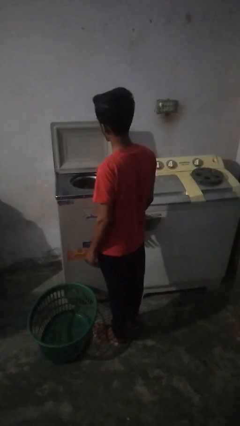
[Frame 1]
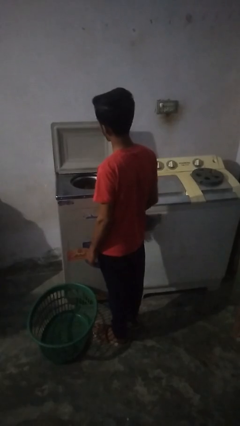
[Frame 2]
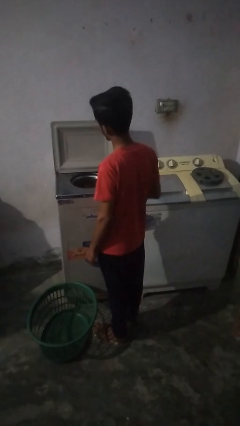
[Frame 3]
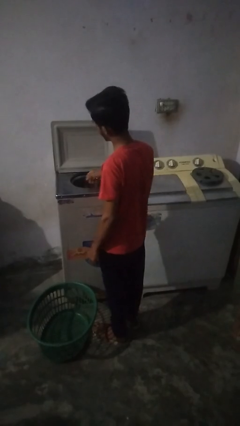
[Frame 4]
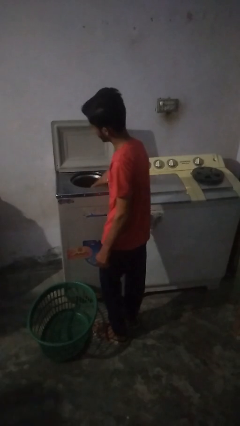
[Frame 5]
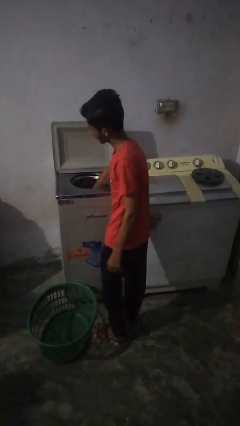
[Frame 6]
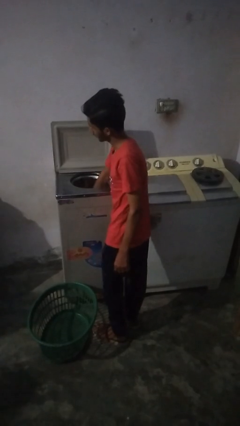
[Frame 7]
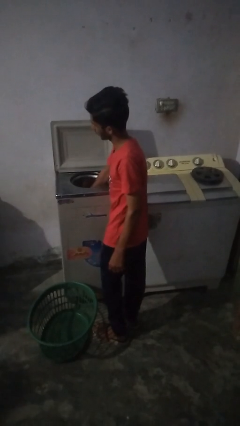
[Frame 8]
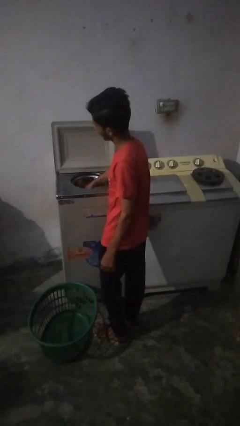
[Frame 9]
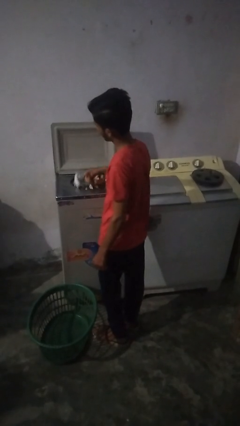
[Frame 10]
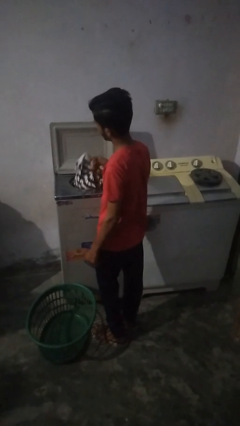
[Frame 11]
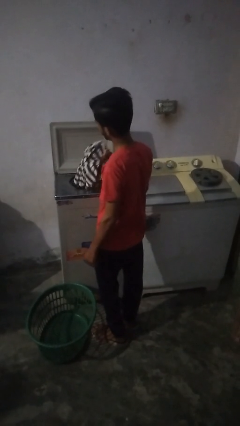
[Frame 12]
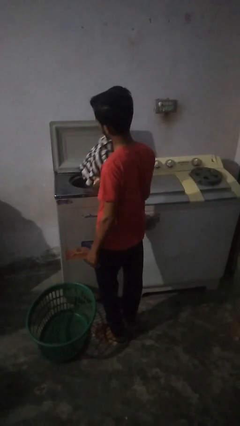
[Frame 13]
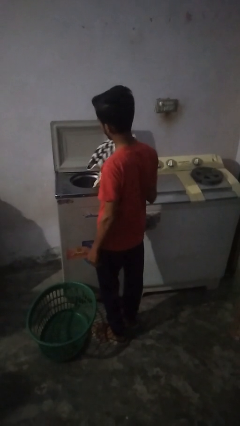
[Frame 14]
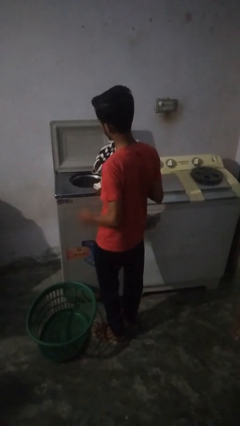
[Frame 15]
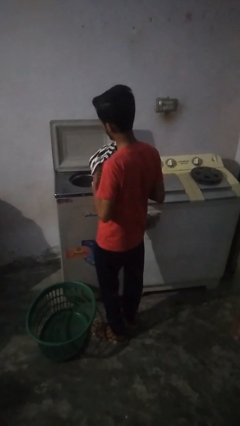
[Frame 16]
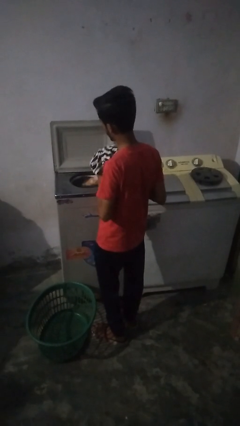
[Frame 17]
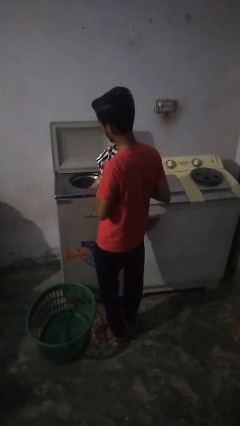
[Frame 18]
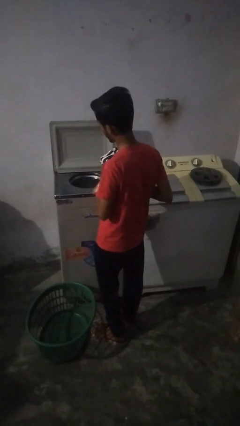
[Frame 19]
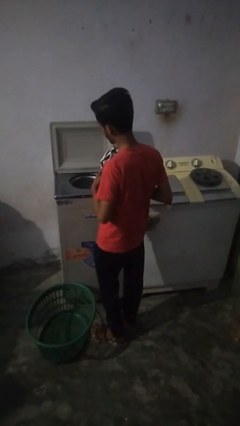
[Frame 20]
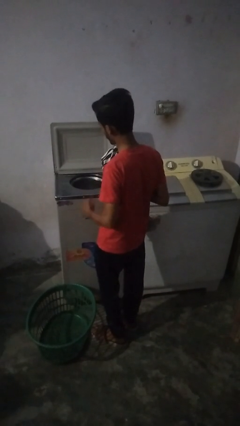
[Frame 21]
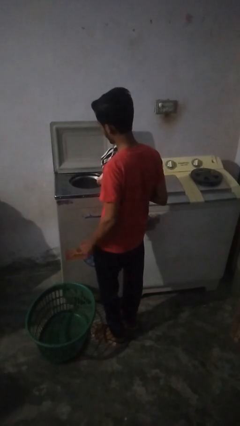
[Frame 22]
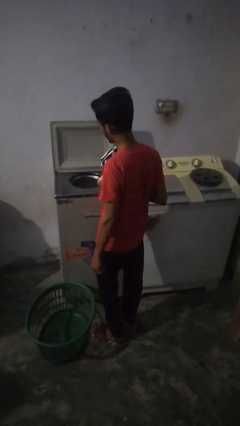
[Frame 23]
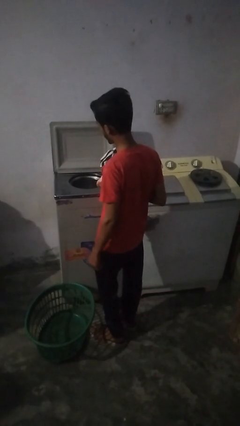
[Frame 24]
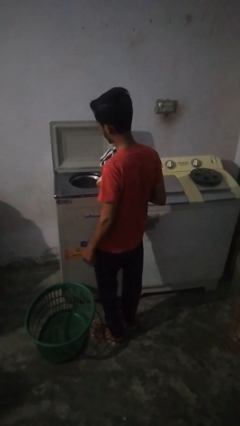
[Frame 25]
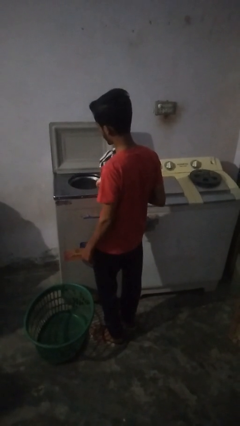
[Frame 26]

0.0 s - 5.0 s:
person unloads dryer

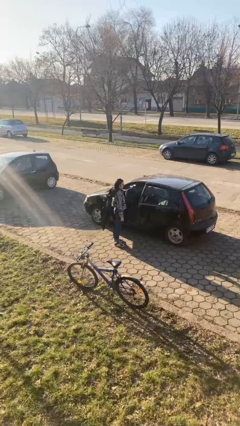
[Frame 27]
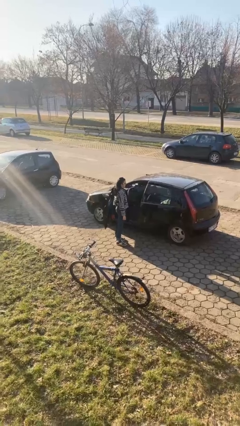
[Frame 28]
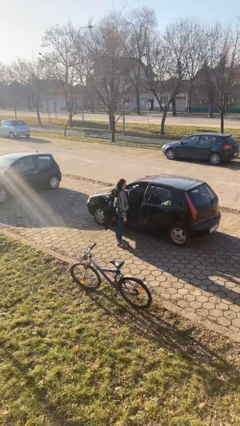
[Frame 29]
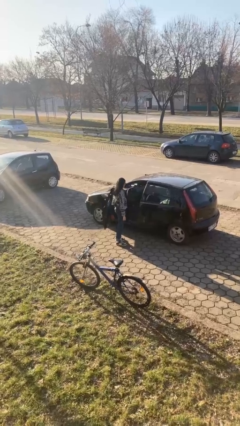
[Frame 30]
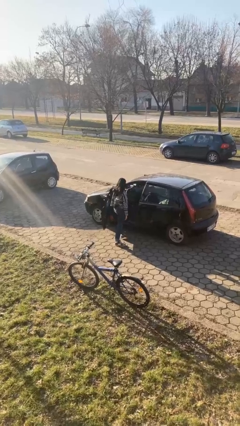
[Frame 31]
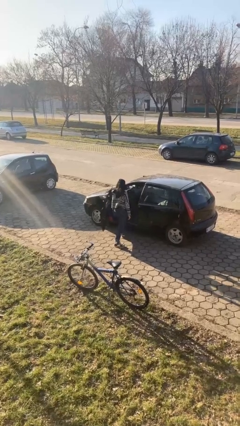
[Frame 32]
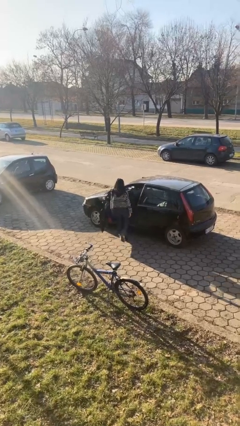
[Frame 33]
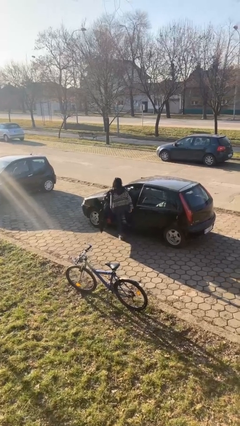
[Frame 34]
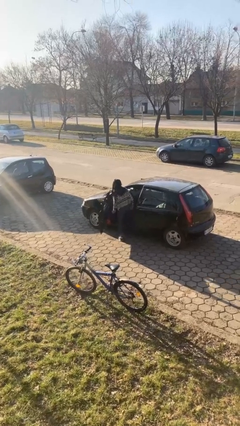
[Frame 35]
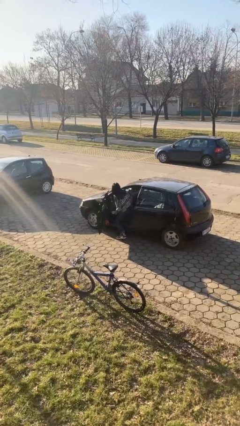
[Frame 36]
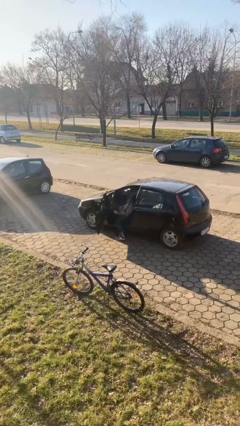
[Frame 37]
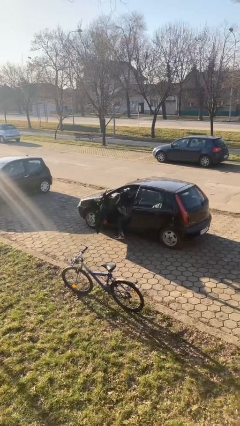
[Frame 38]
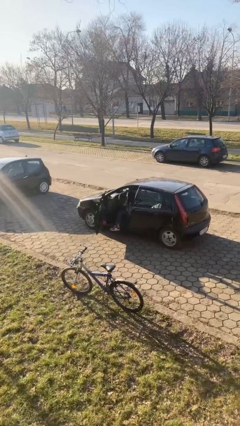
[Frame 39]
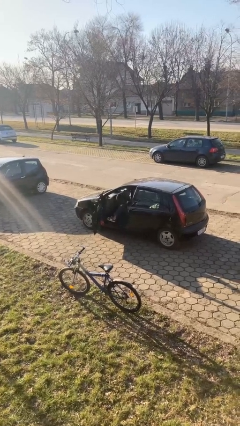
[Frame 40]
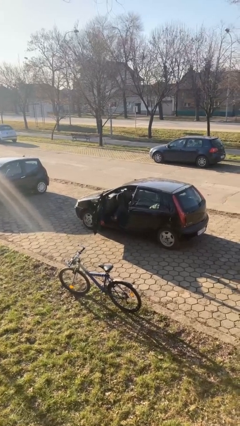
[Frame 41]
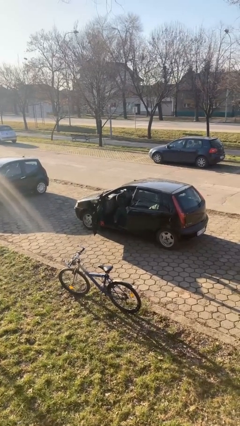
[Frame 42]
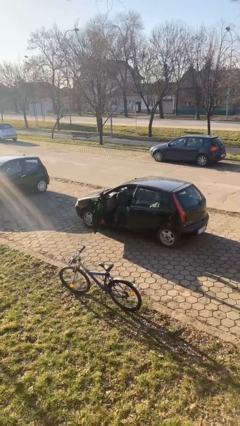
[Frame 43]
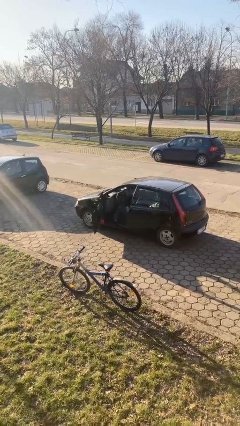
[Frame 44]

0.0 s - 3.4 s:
person enters car

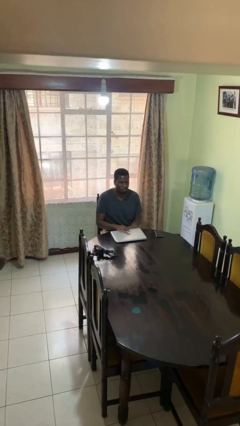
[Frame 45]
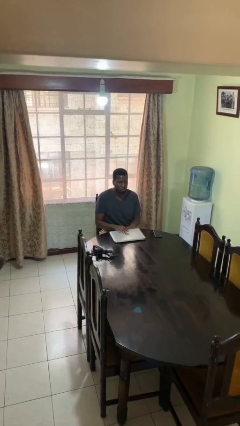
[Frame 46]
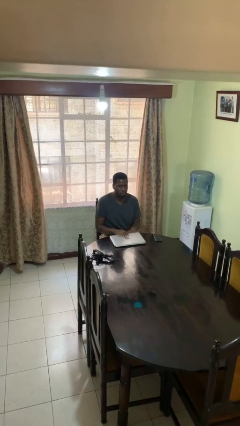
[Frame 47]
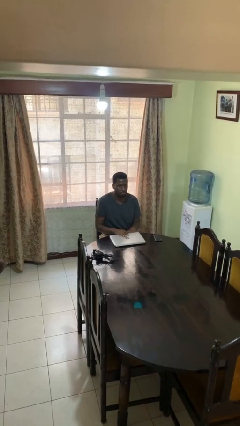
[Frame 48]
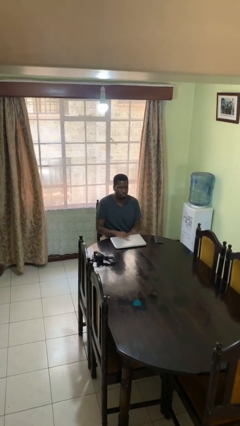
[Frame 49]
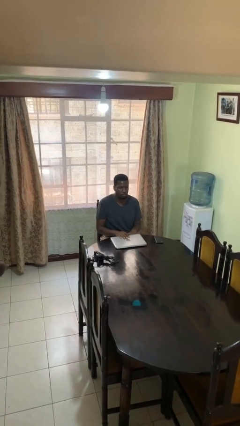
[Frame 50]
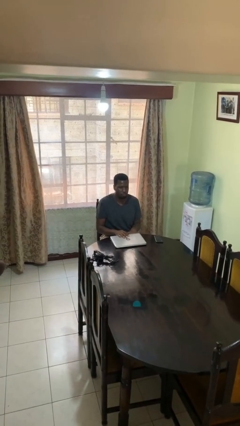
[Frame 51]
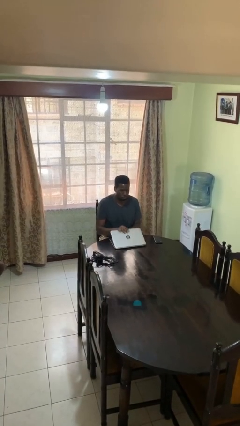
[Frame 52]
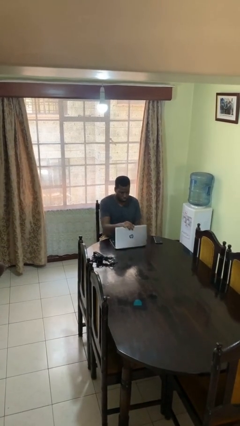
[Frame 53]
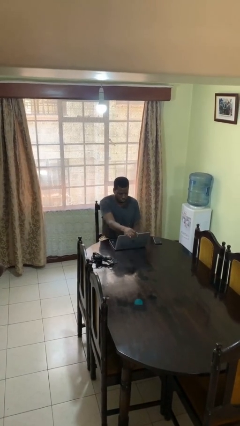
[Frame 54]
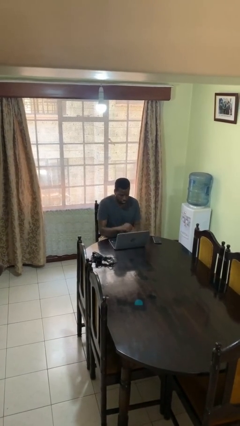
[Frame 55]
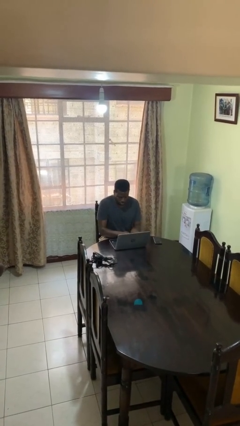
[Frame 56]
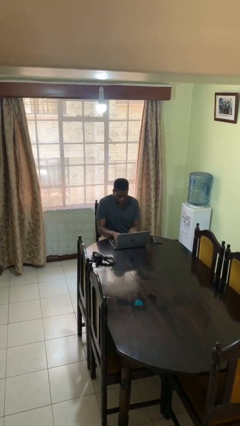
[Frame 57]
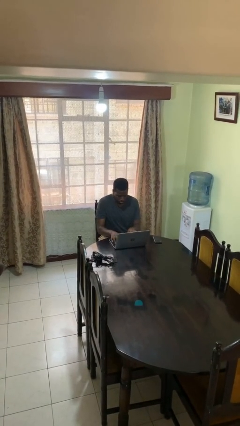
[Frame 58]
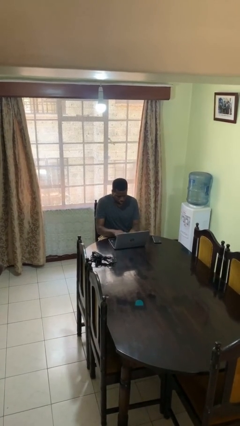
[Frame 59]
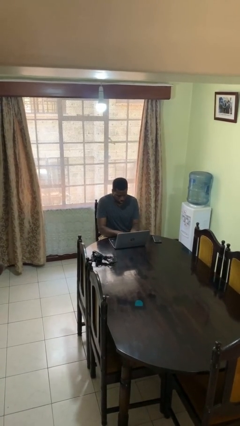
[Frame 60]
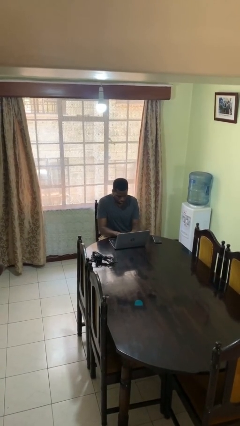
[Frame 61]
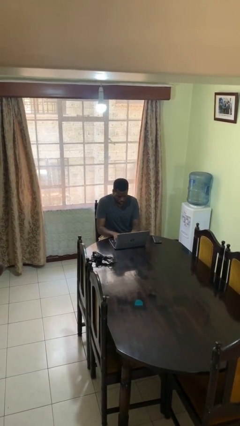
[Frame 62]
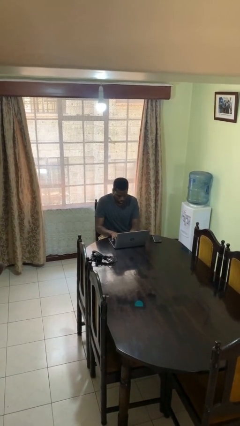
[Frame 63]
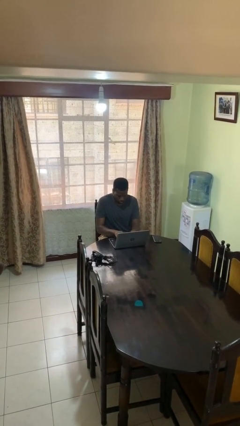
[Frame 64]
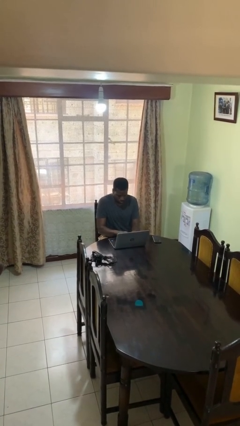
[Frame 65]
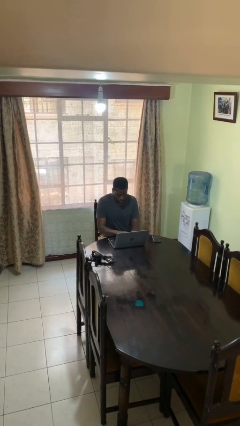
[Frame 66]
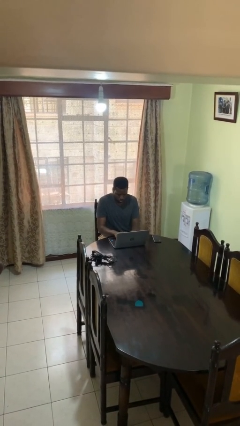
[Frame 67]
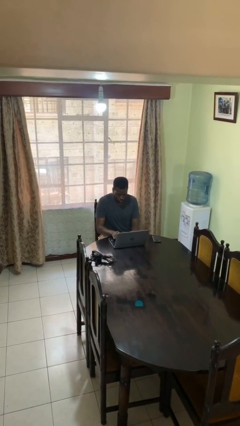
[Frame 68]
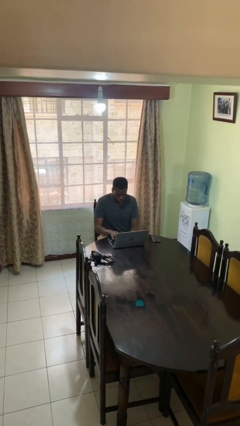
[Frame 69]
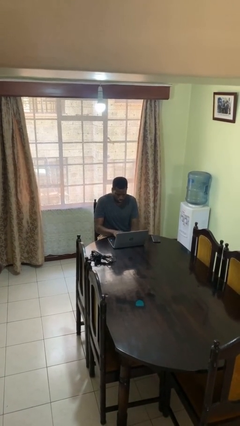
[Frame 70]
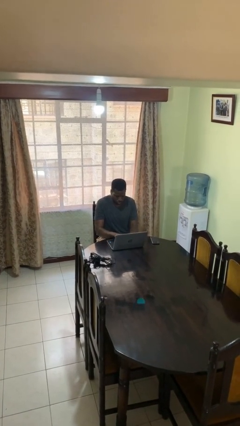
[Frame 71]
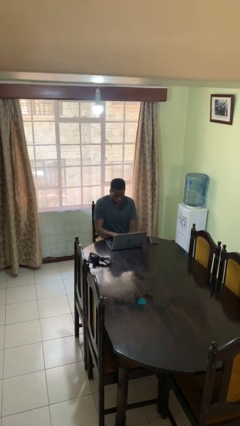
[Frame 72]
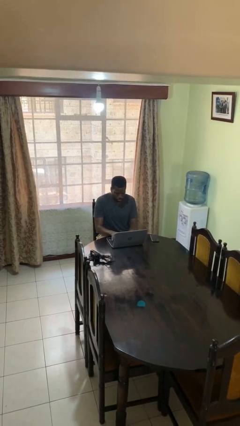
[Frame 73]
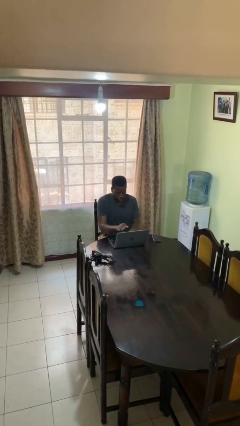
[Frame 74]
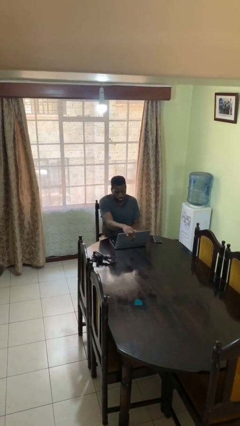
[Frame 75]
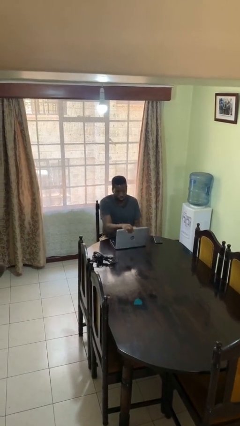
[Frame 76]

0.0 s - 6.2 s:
person interacts with laptop

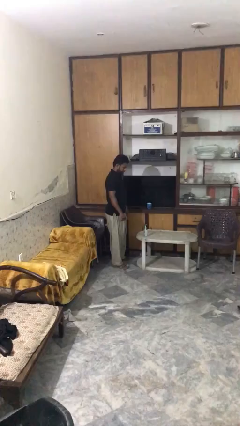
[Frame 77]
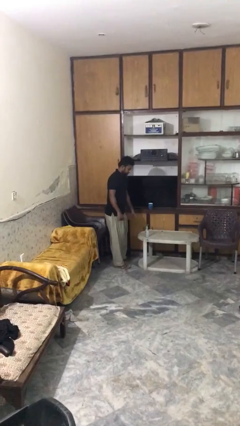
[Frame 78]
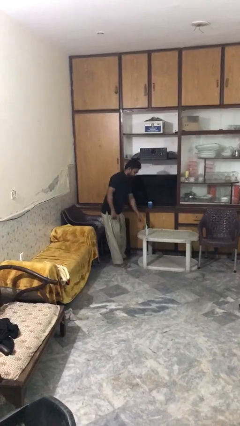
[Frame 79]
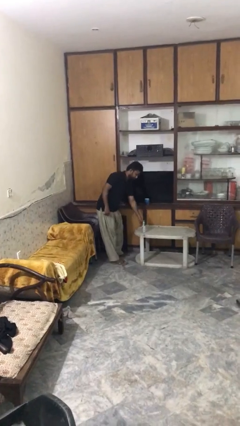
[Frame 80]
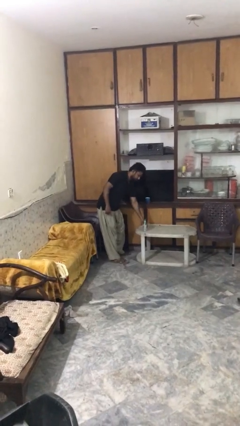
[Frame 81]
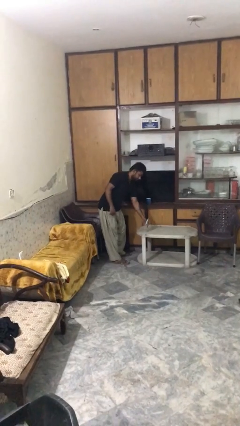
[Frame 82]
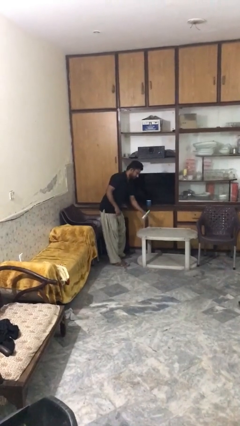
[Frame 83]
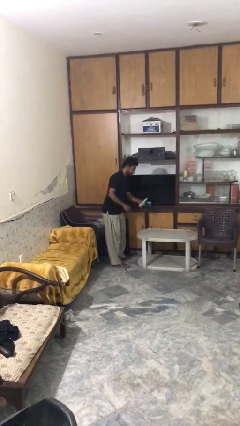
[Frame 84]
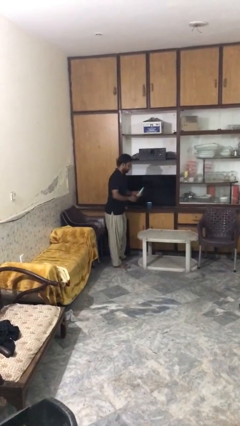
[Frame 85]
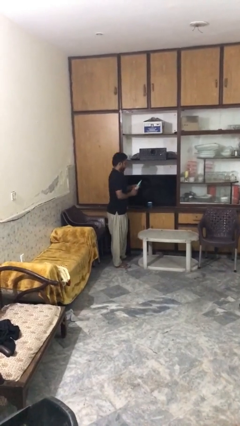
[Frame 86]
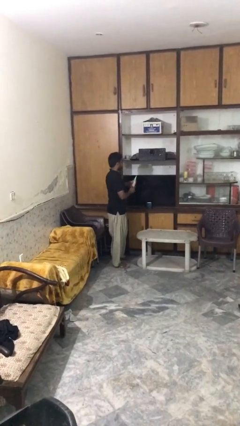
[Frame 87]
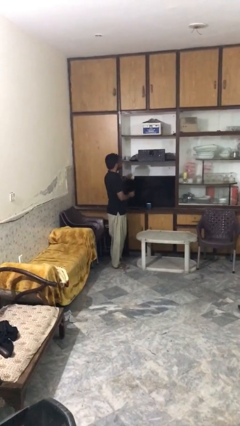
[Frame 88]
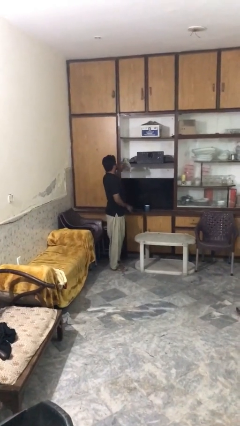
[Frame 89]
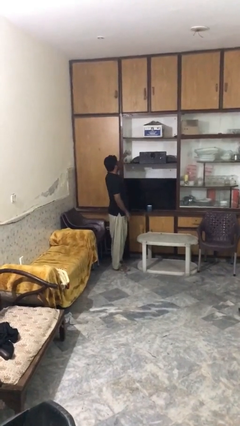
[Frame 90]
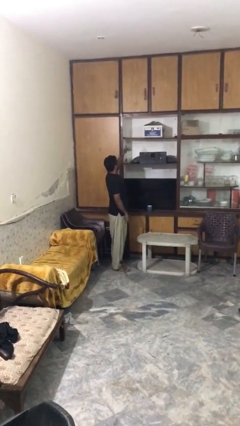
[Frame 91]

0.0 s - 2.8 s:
person picks up object from table

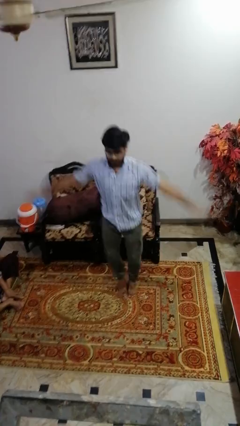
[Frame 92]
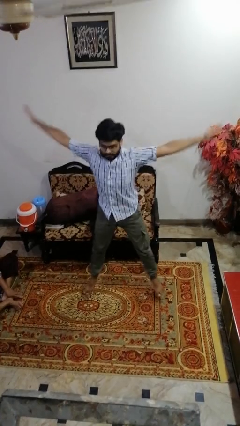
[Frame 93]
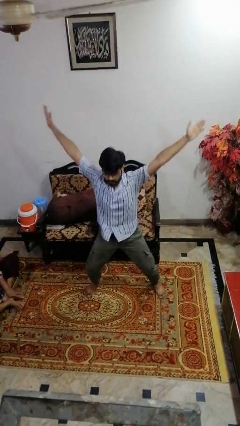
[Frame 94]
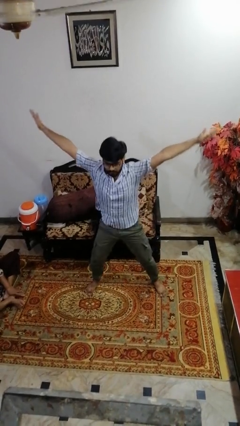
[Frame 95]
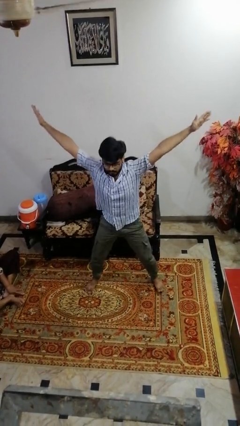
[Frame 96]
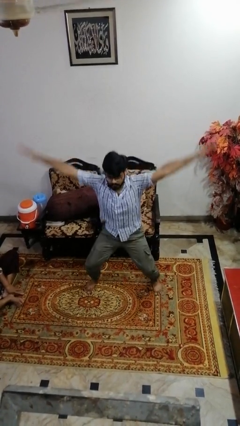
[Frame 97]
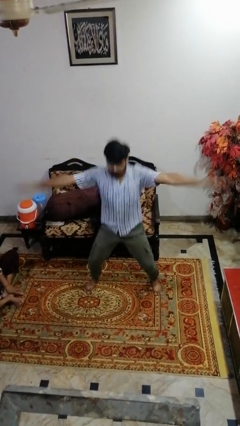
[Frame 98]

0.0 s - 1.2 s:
person exercises with jumping jacks
